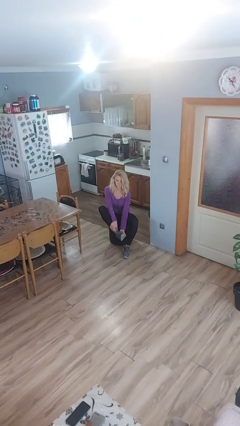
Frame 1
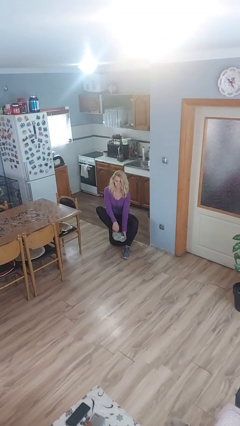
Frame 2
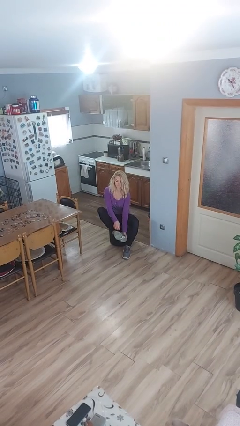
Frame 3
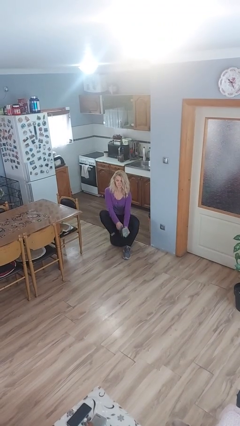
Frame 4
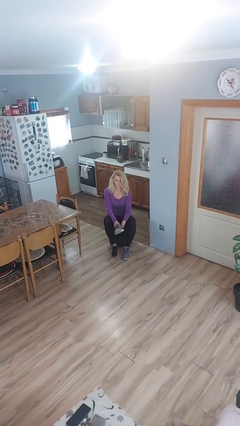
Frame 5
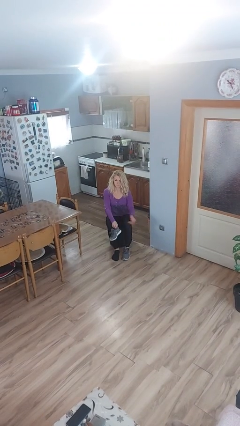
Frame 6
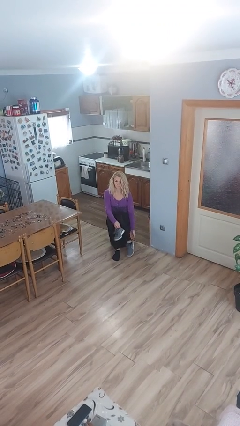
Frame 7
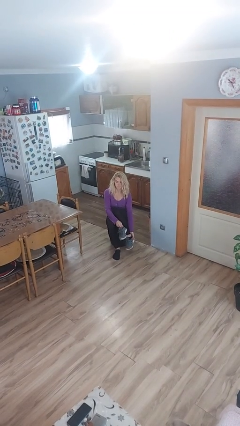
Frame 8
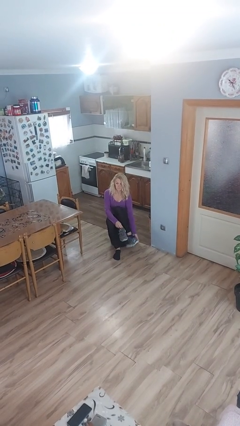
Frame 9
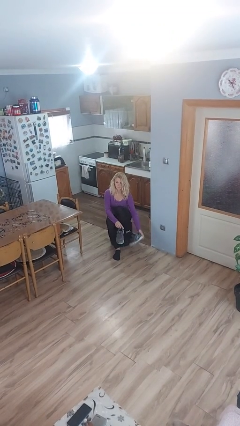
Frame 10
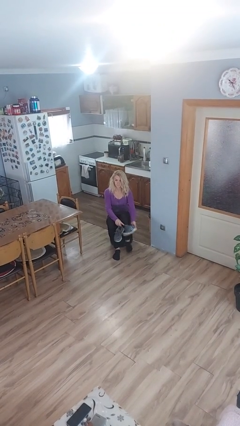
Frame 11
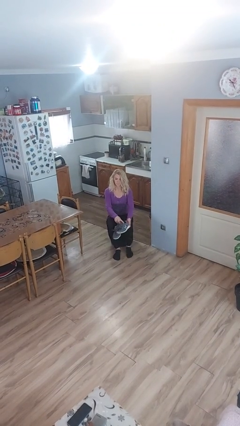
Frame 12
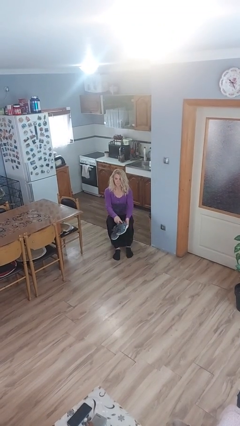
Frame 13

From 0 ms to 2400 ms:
person takes off shoes

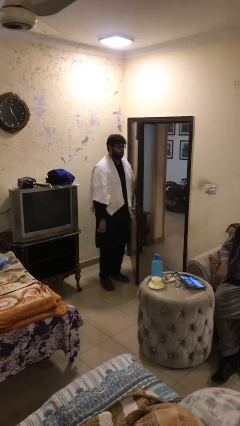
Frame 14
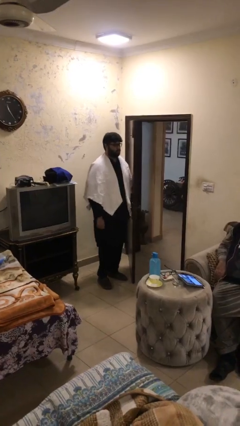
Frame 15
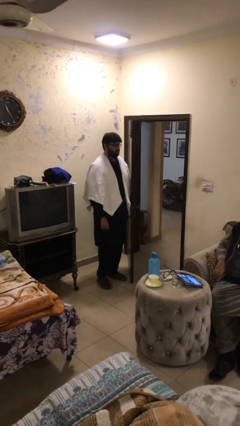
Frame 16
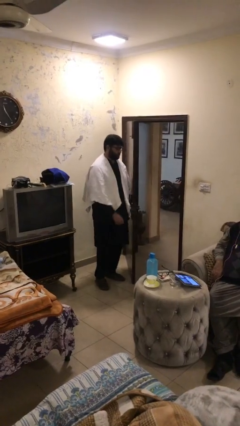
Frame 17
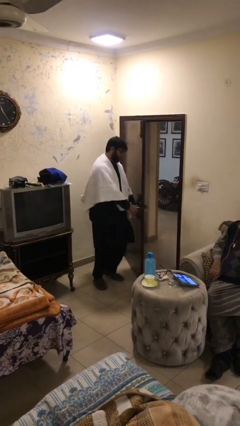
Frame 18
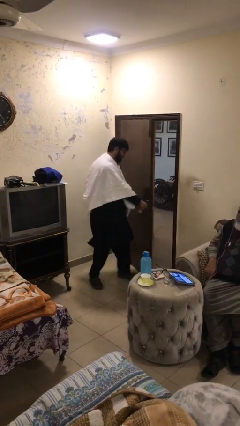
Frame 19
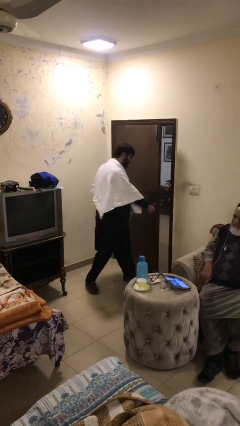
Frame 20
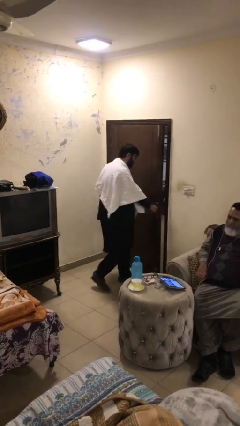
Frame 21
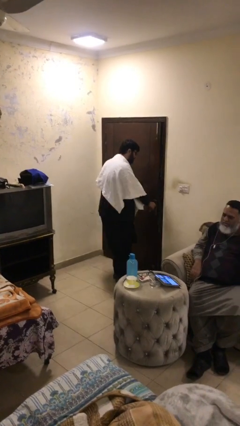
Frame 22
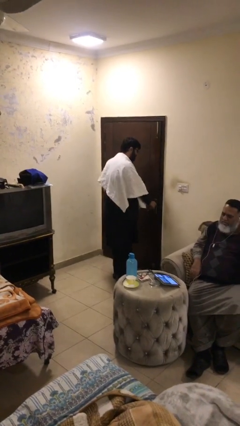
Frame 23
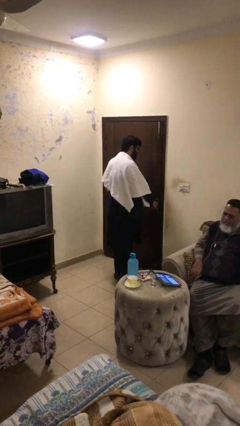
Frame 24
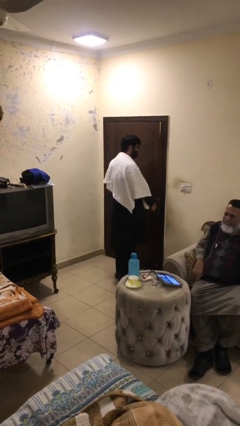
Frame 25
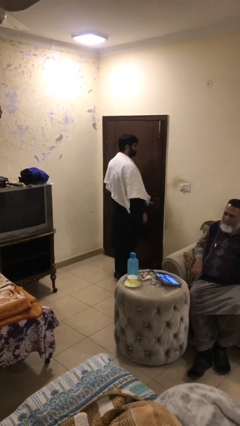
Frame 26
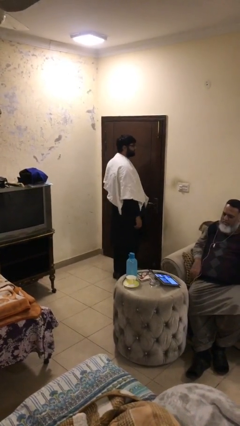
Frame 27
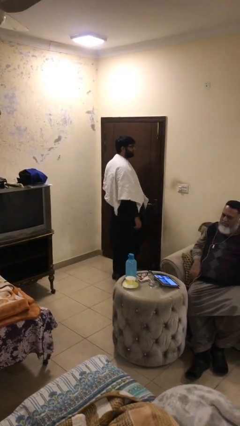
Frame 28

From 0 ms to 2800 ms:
person closes facility door

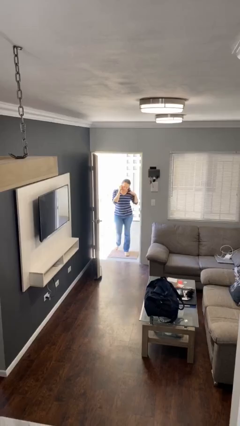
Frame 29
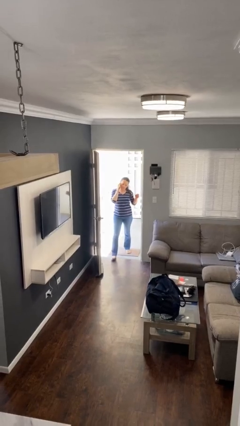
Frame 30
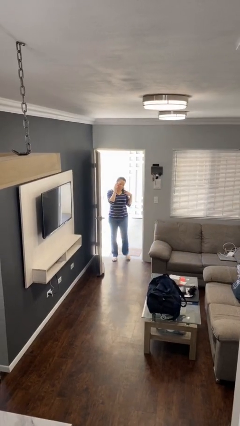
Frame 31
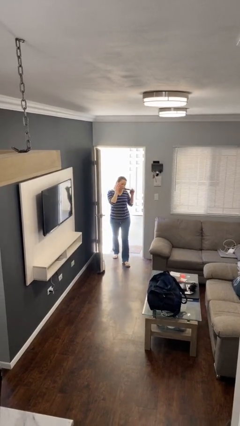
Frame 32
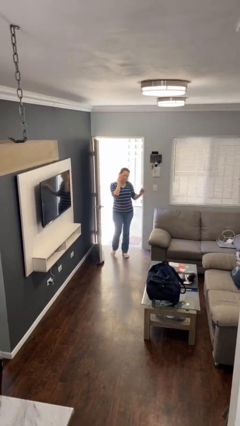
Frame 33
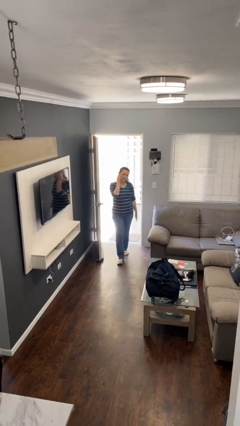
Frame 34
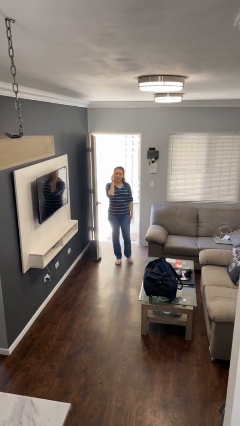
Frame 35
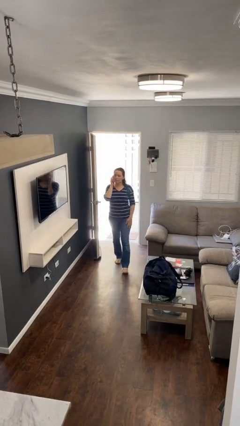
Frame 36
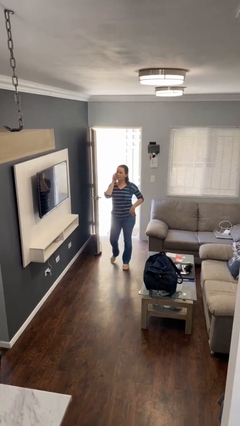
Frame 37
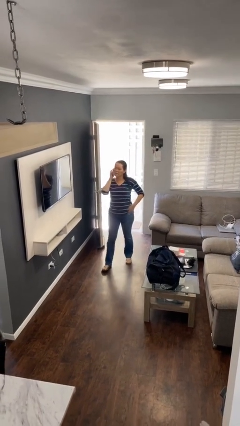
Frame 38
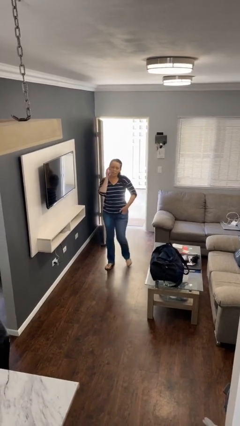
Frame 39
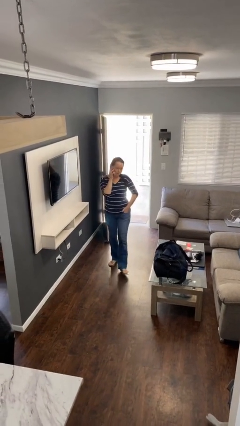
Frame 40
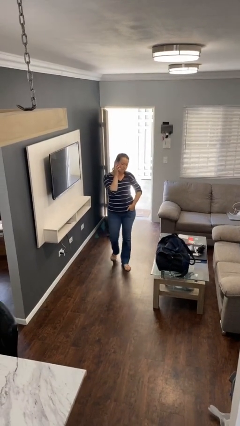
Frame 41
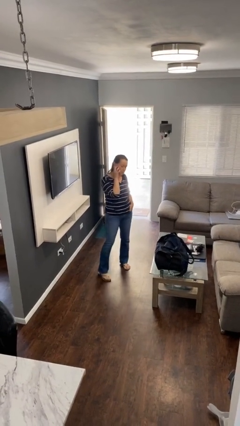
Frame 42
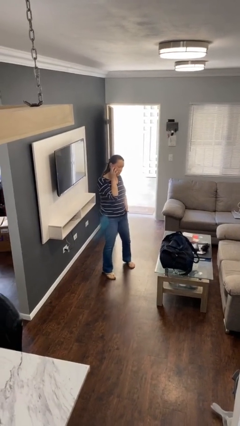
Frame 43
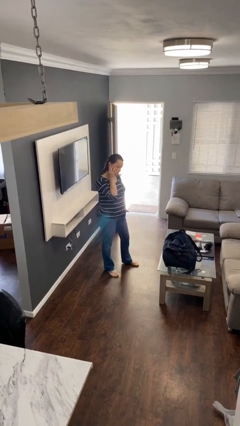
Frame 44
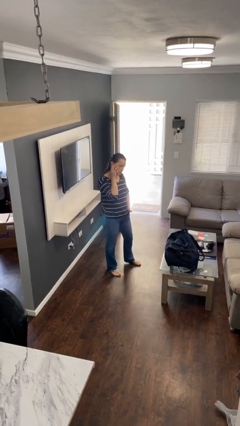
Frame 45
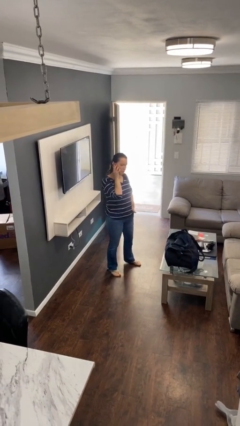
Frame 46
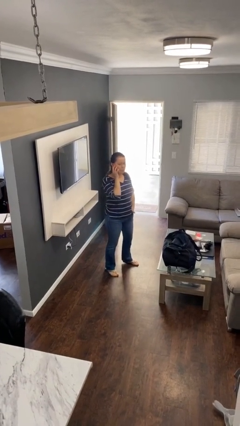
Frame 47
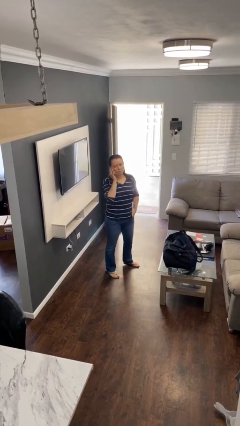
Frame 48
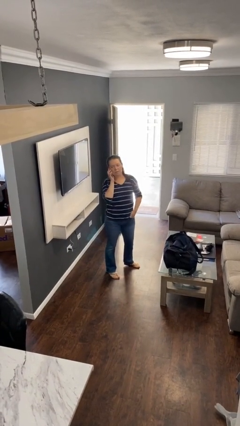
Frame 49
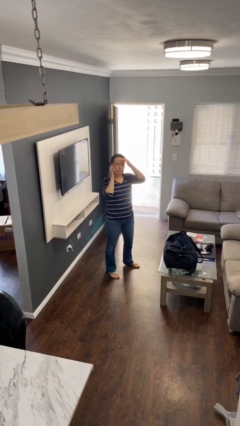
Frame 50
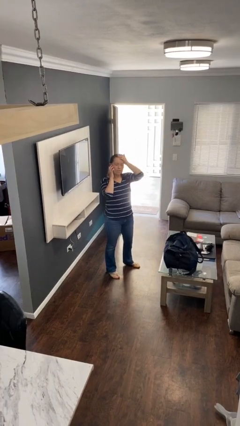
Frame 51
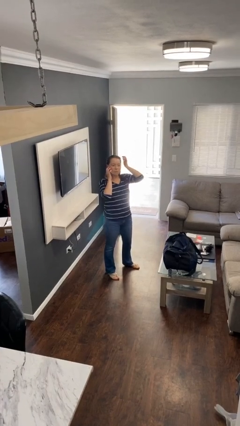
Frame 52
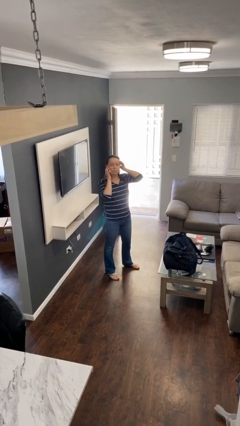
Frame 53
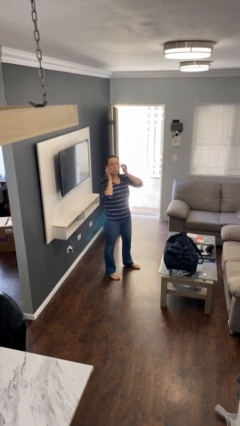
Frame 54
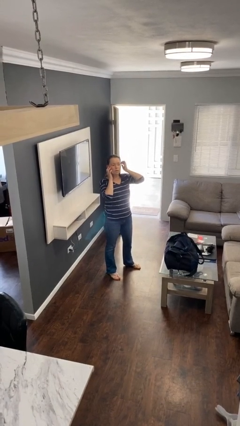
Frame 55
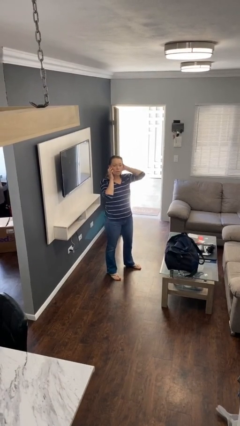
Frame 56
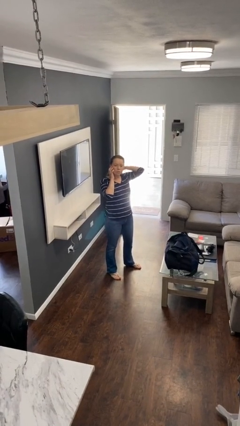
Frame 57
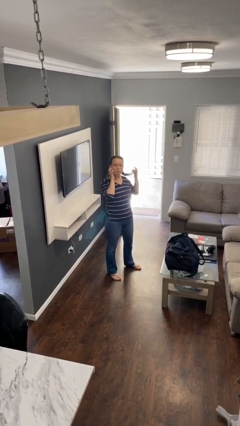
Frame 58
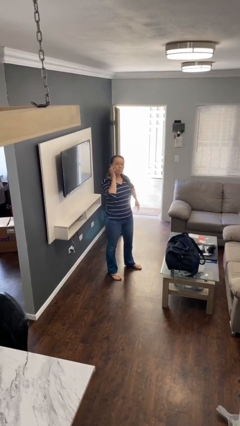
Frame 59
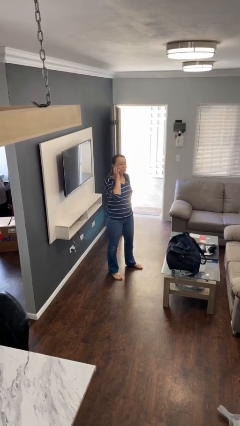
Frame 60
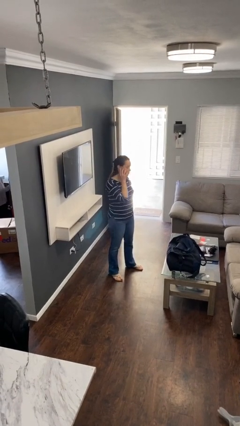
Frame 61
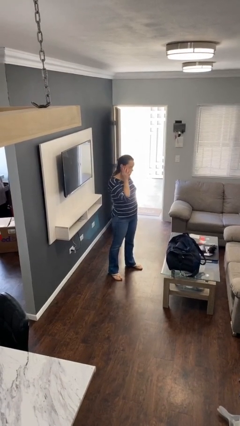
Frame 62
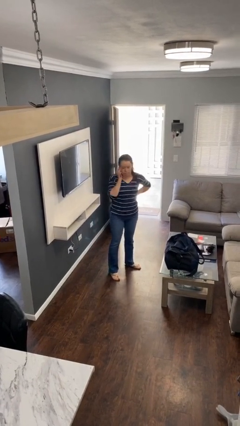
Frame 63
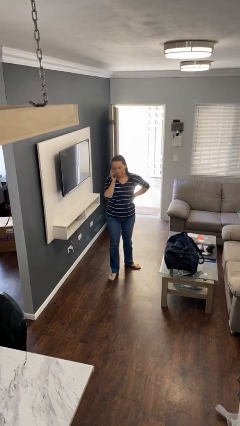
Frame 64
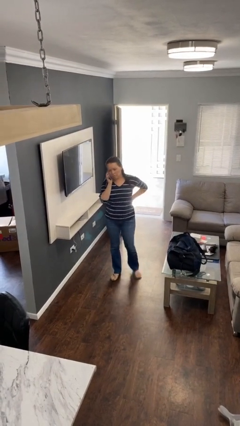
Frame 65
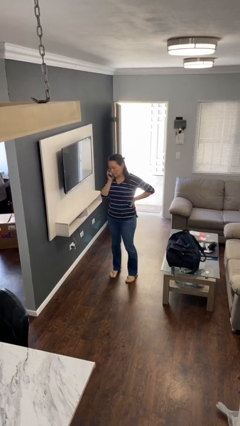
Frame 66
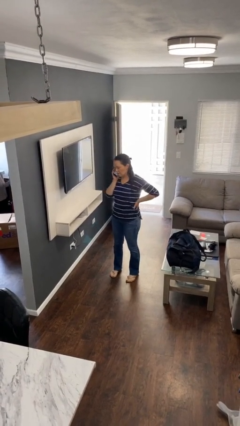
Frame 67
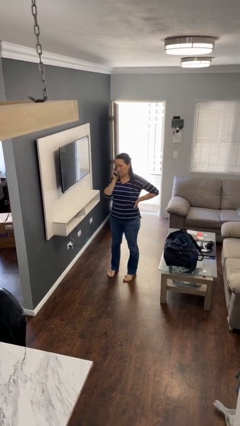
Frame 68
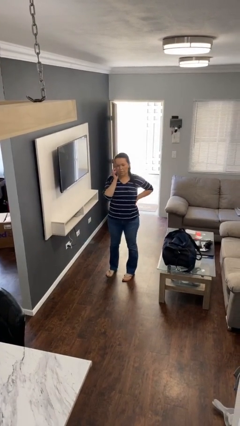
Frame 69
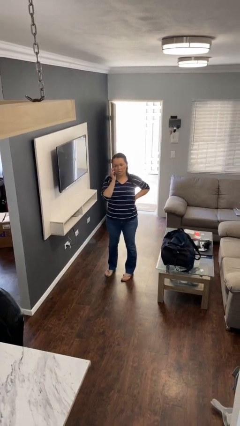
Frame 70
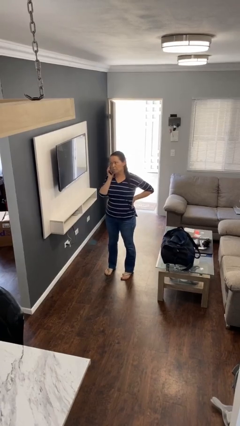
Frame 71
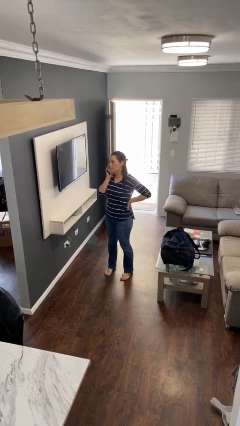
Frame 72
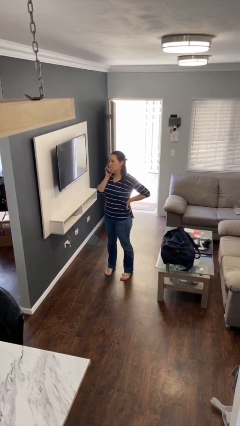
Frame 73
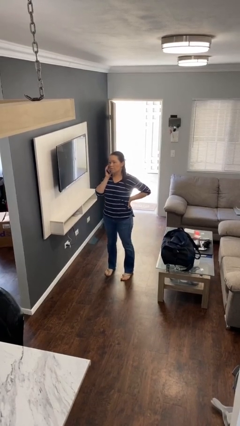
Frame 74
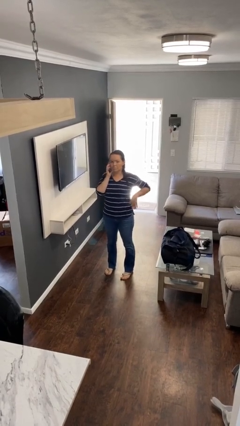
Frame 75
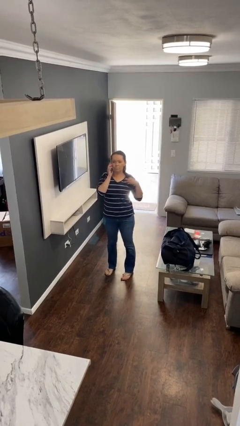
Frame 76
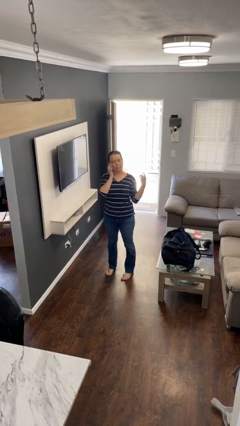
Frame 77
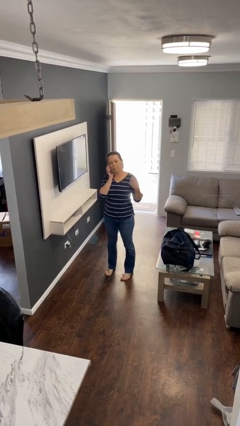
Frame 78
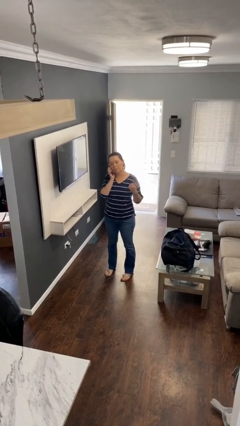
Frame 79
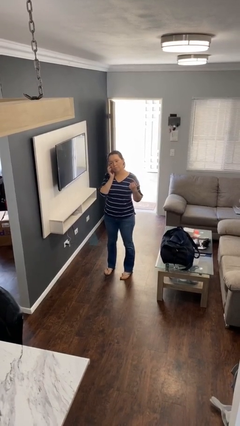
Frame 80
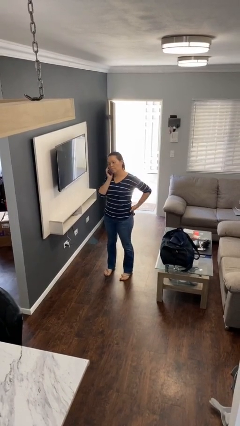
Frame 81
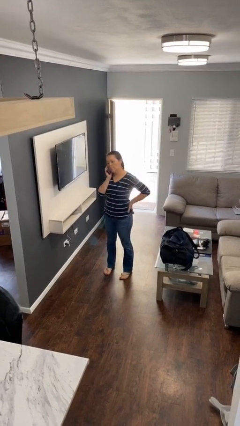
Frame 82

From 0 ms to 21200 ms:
person enters scene through structure

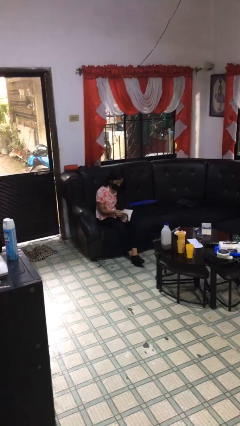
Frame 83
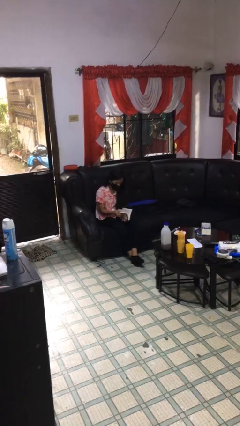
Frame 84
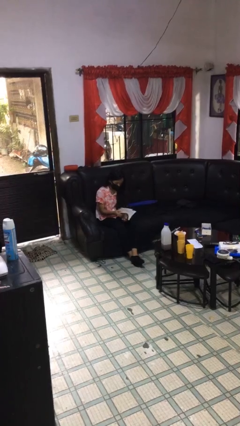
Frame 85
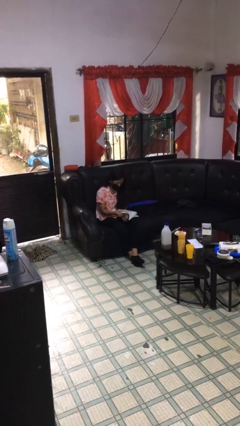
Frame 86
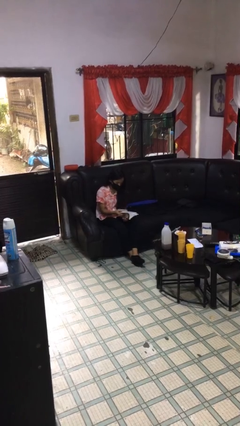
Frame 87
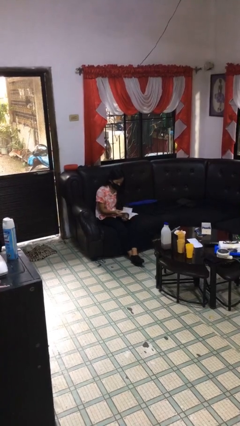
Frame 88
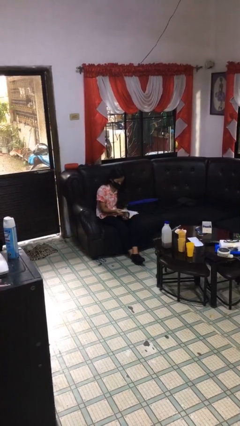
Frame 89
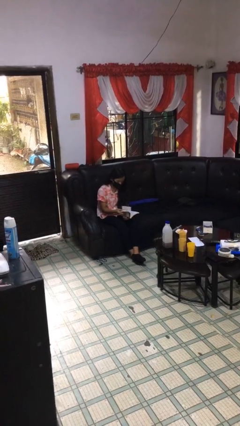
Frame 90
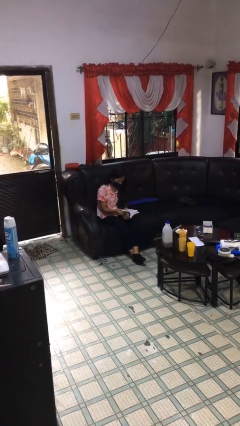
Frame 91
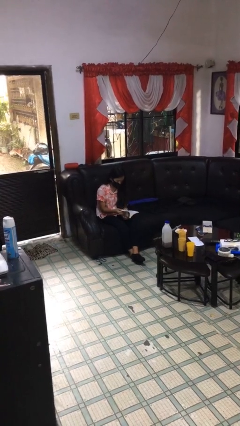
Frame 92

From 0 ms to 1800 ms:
person reads document
